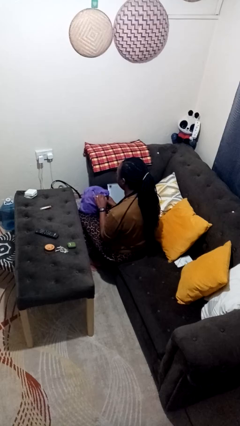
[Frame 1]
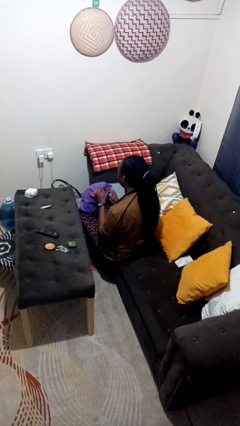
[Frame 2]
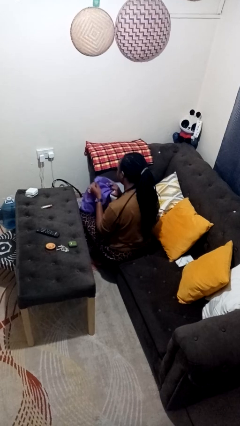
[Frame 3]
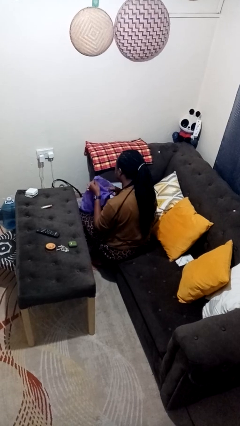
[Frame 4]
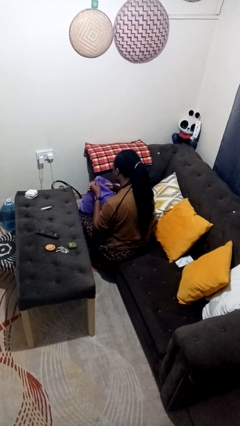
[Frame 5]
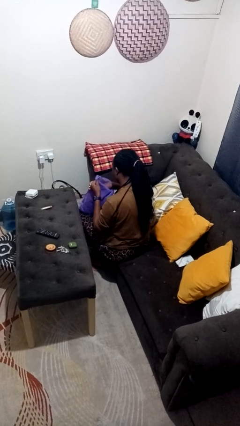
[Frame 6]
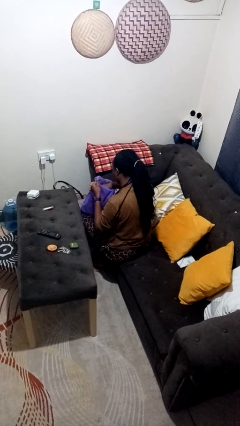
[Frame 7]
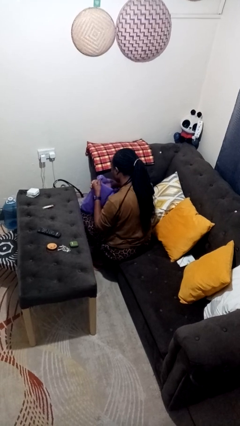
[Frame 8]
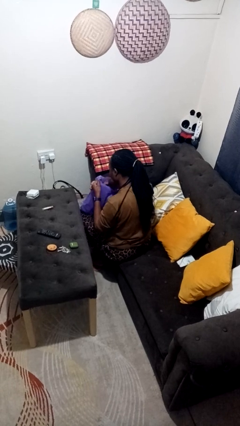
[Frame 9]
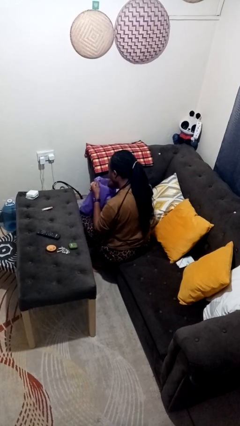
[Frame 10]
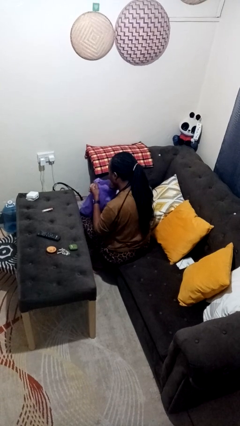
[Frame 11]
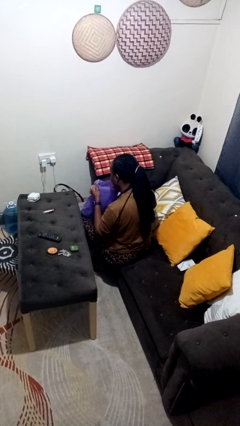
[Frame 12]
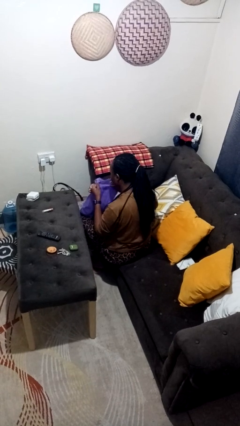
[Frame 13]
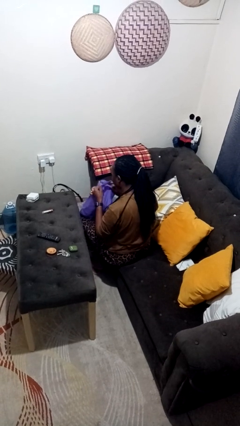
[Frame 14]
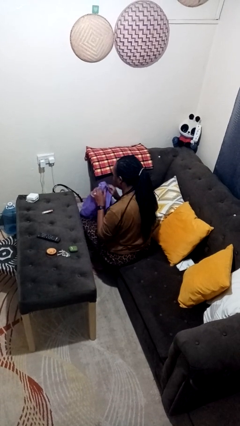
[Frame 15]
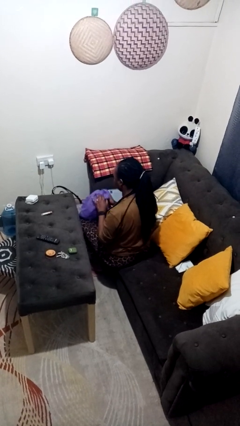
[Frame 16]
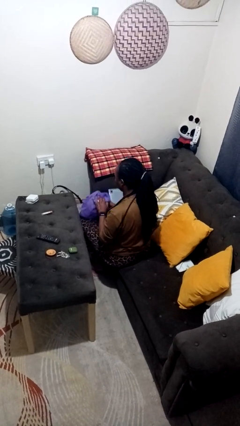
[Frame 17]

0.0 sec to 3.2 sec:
person searches in bag

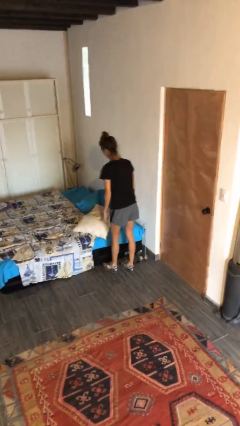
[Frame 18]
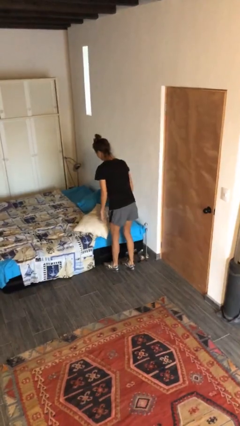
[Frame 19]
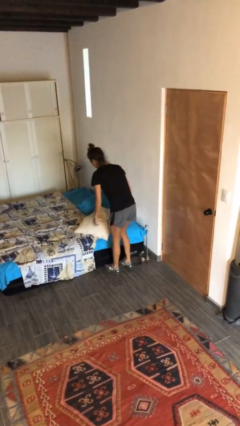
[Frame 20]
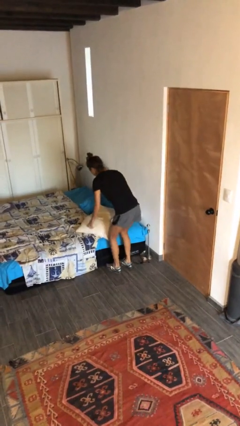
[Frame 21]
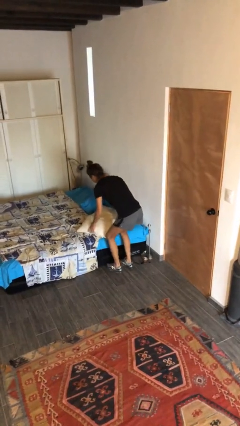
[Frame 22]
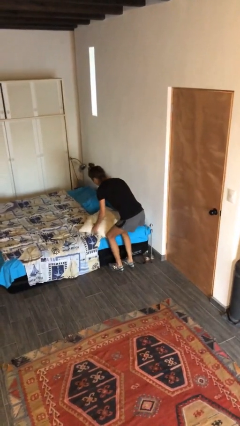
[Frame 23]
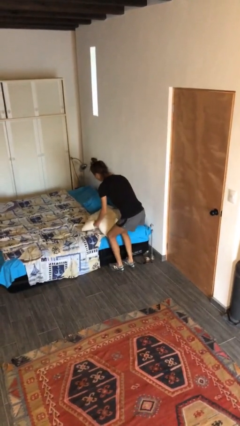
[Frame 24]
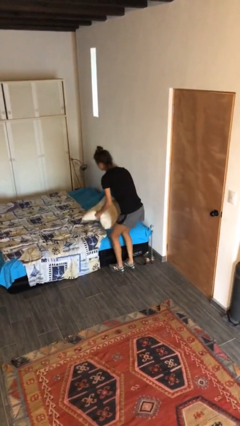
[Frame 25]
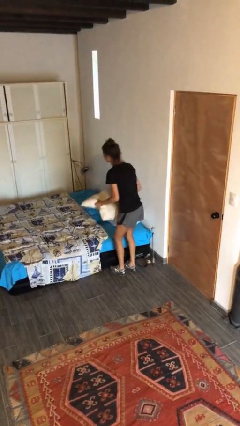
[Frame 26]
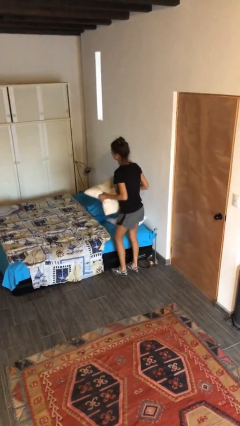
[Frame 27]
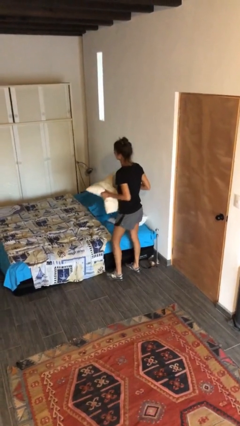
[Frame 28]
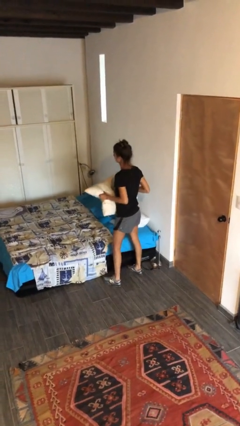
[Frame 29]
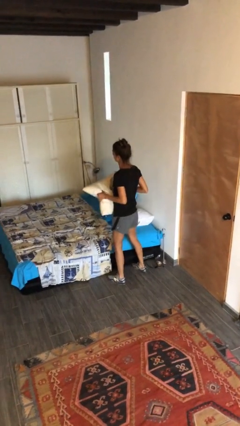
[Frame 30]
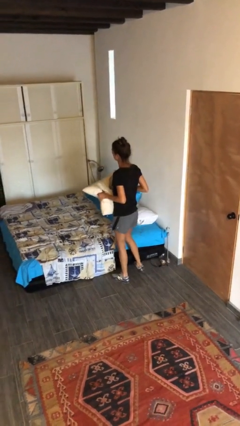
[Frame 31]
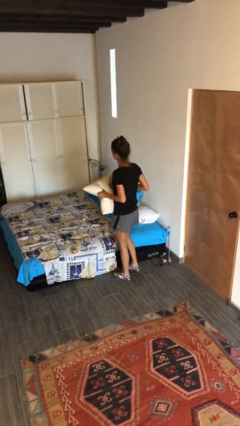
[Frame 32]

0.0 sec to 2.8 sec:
person picks up object from bed

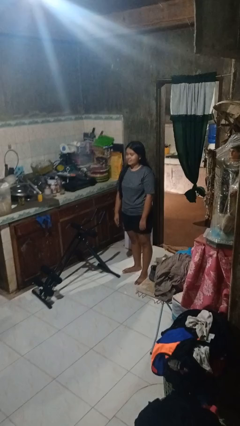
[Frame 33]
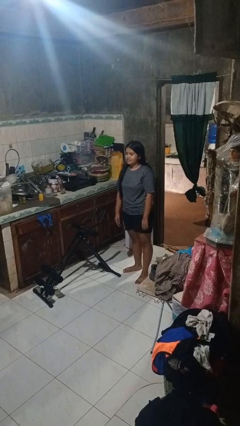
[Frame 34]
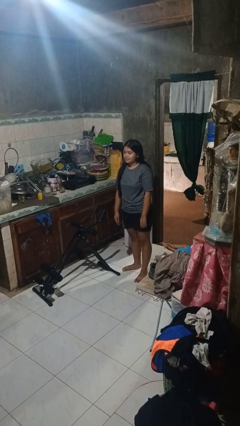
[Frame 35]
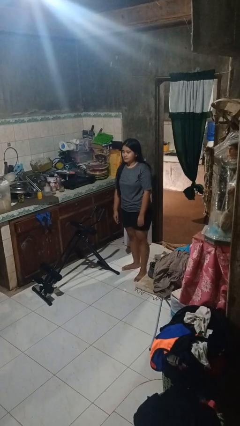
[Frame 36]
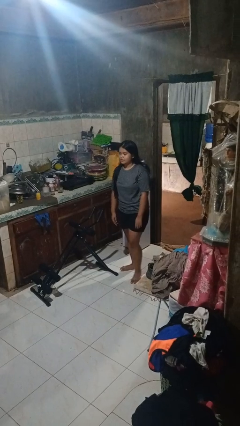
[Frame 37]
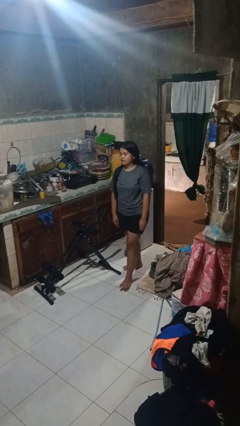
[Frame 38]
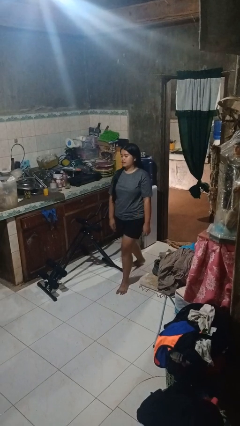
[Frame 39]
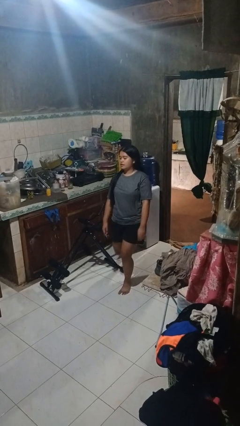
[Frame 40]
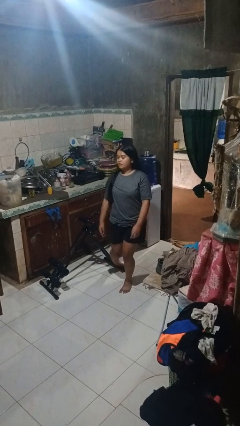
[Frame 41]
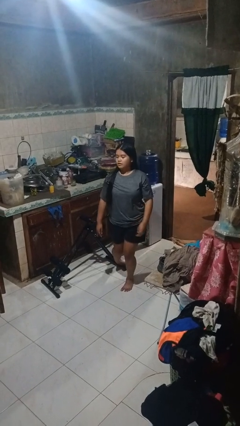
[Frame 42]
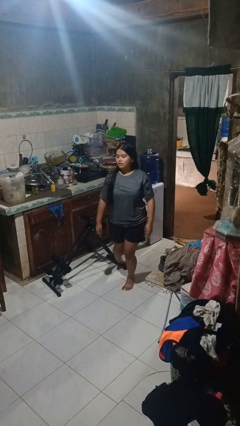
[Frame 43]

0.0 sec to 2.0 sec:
person trips on object on floor

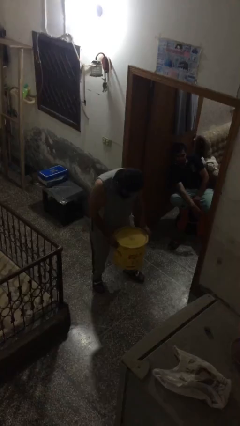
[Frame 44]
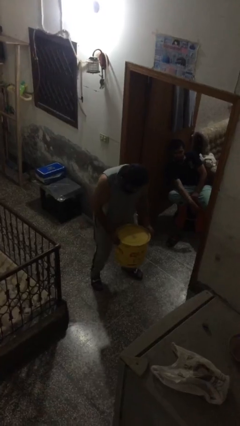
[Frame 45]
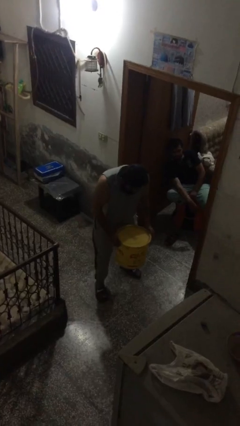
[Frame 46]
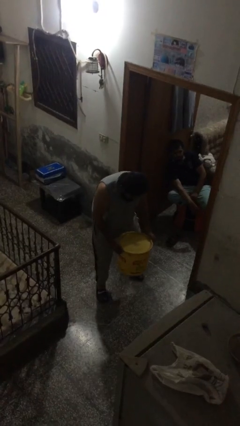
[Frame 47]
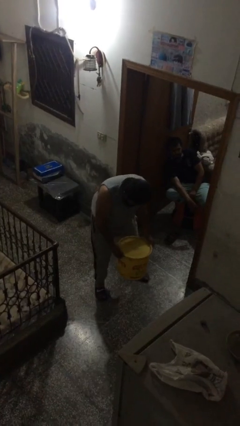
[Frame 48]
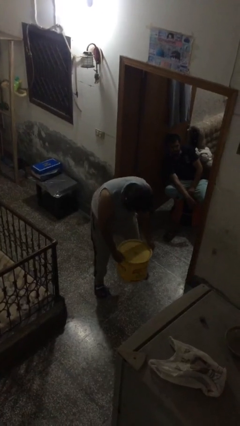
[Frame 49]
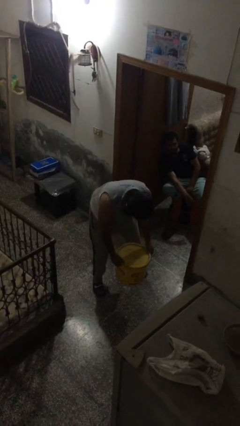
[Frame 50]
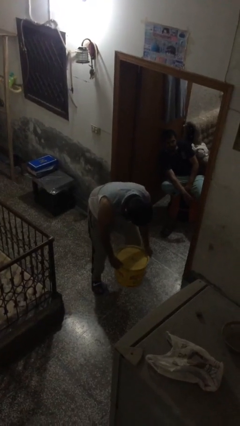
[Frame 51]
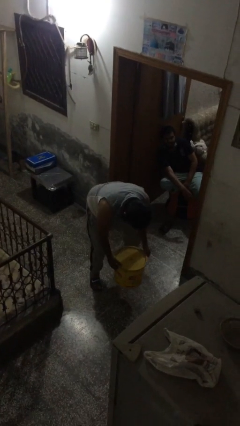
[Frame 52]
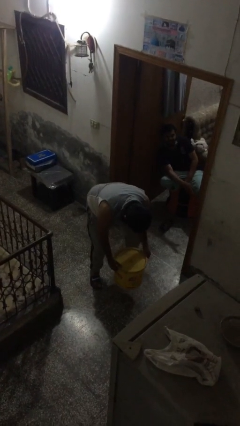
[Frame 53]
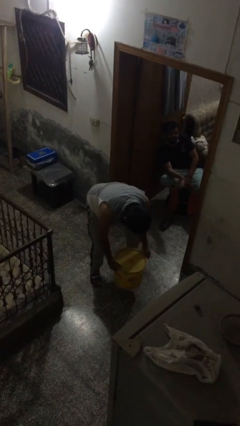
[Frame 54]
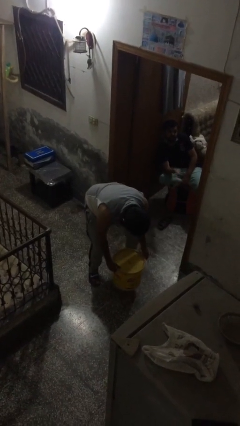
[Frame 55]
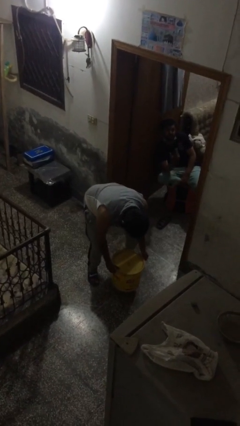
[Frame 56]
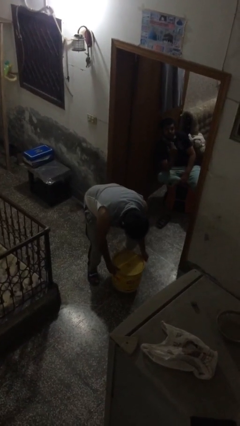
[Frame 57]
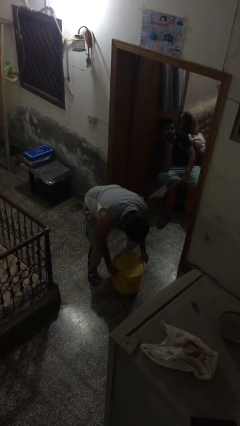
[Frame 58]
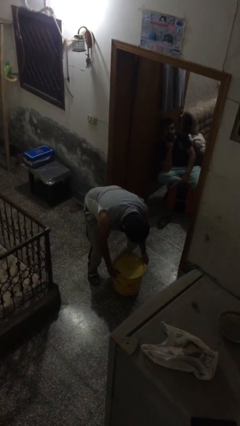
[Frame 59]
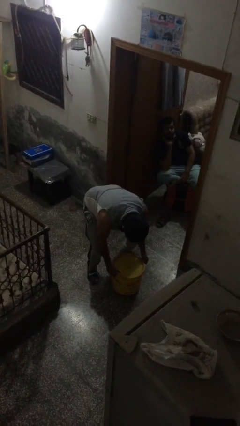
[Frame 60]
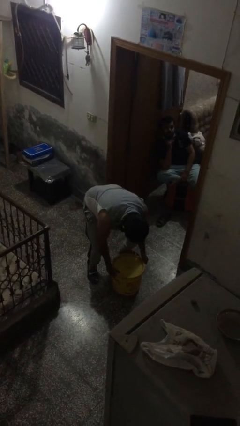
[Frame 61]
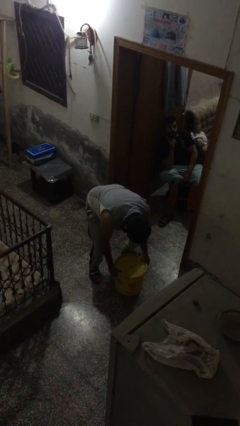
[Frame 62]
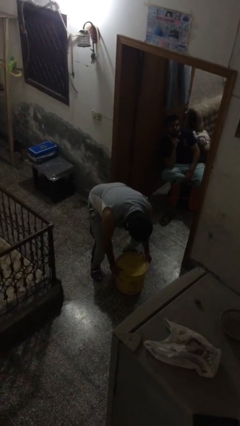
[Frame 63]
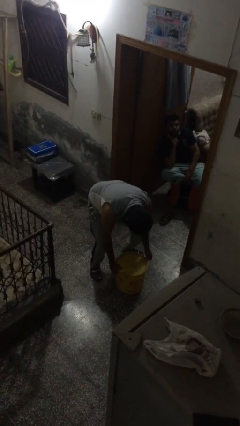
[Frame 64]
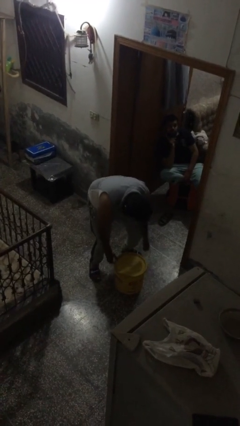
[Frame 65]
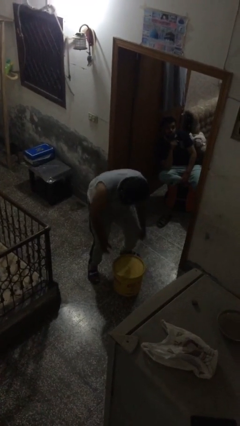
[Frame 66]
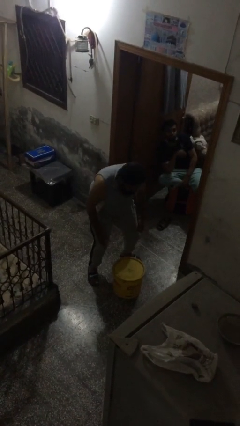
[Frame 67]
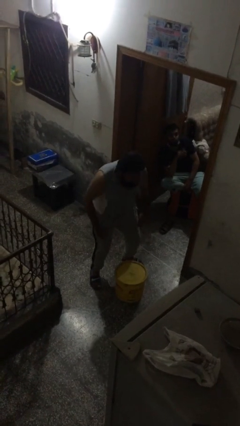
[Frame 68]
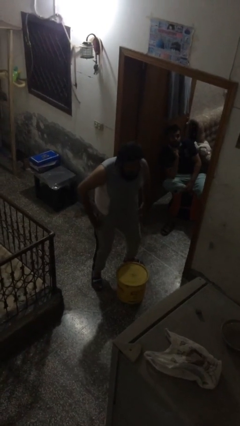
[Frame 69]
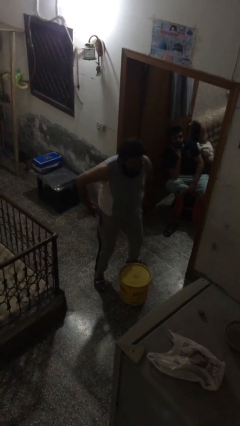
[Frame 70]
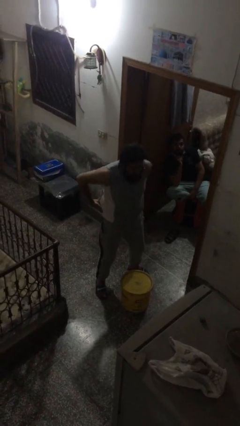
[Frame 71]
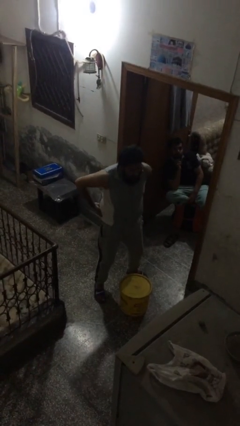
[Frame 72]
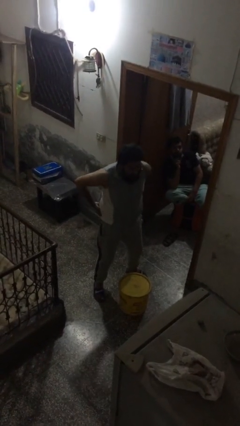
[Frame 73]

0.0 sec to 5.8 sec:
person puts down object on floor

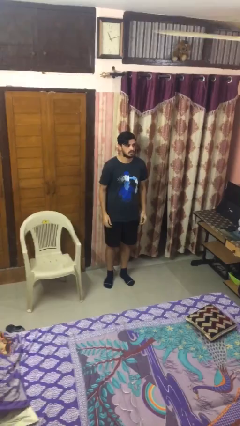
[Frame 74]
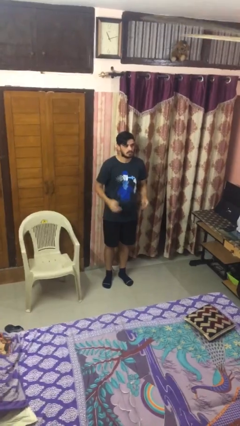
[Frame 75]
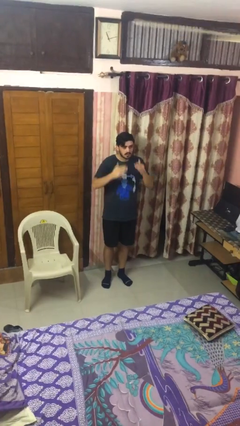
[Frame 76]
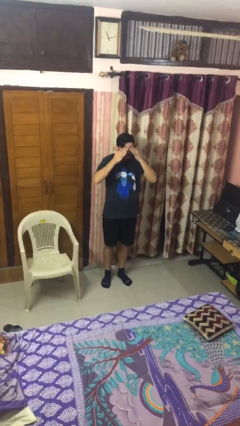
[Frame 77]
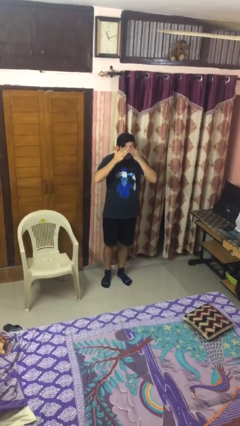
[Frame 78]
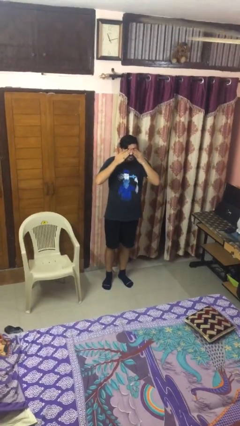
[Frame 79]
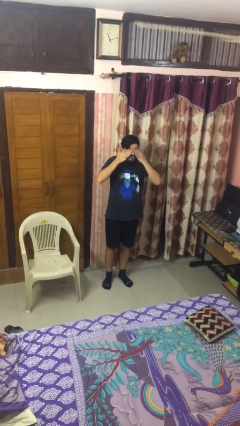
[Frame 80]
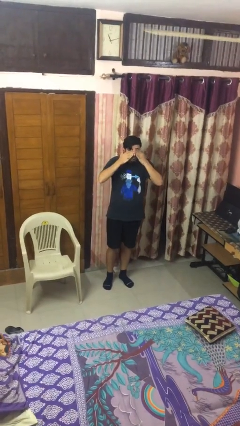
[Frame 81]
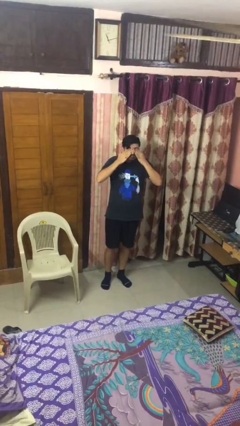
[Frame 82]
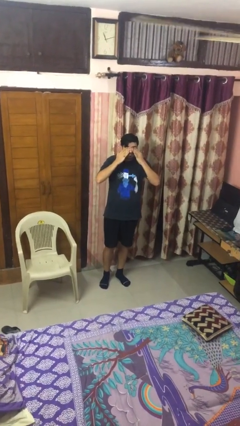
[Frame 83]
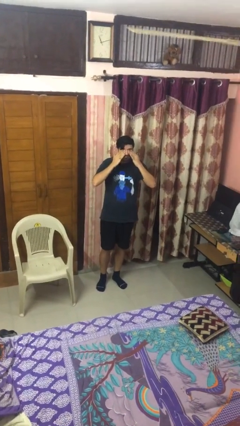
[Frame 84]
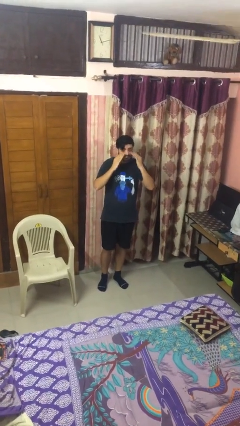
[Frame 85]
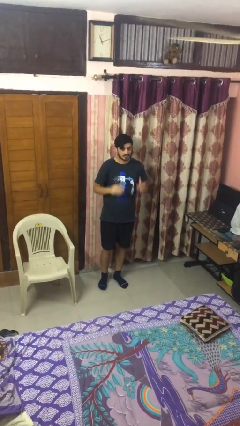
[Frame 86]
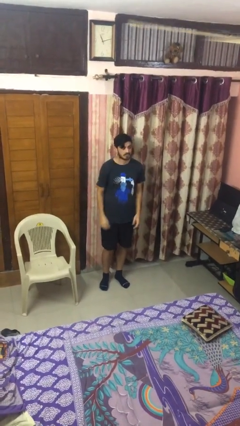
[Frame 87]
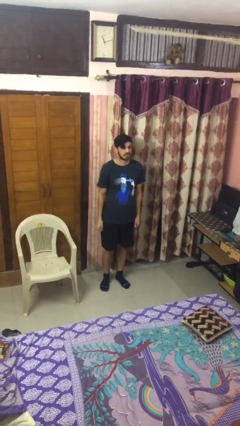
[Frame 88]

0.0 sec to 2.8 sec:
person rubs eyes

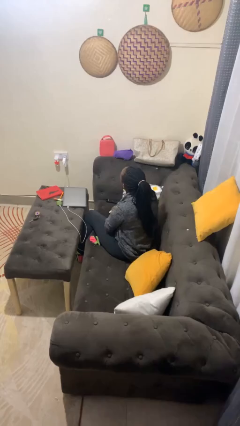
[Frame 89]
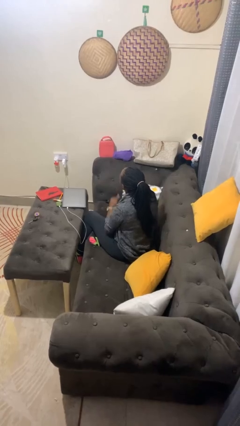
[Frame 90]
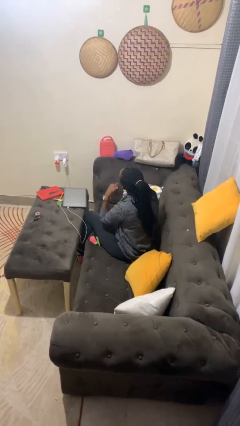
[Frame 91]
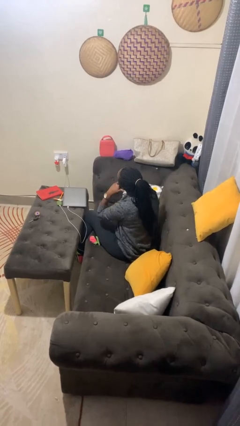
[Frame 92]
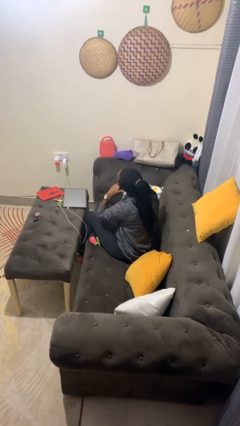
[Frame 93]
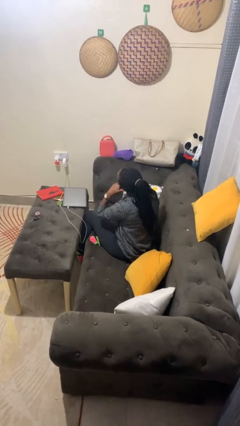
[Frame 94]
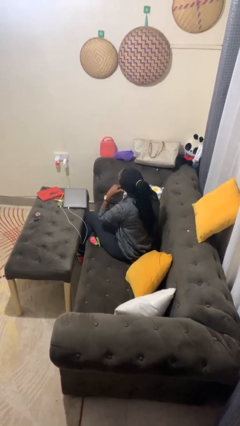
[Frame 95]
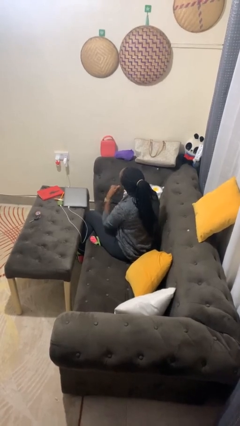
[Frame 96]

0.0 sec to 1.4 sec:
person gestures call me
